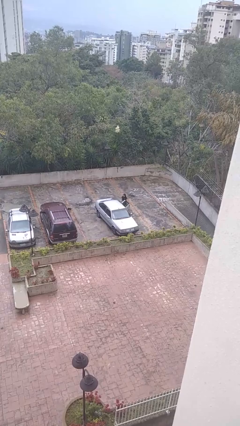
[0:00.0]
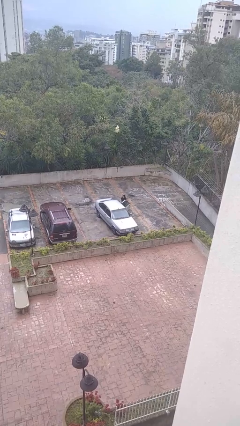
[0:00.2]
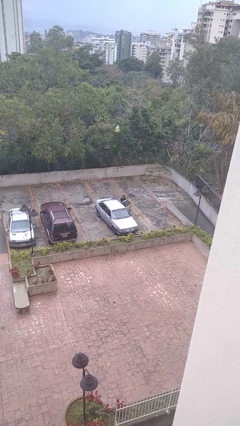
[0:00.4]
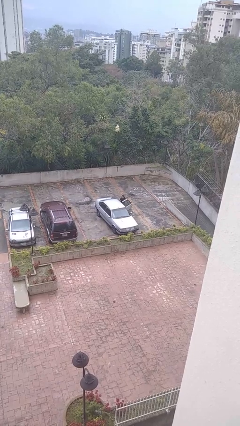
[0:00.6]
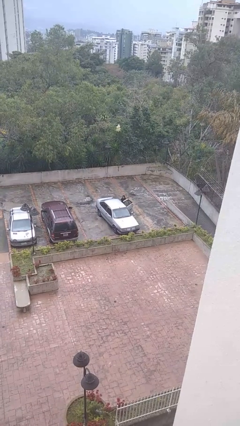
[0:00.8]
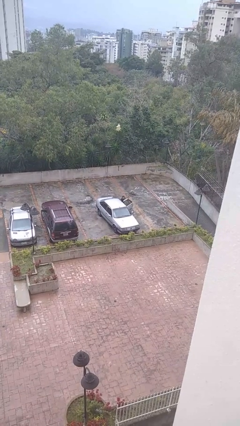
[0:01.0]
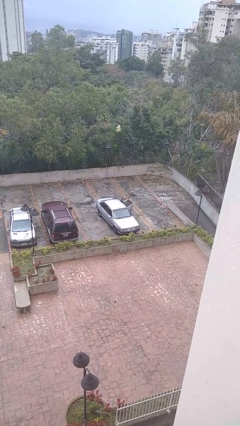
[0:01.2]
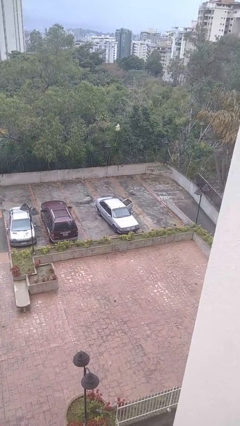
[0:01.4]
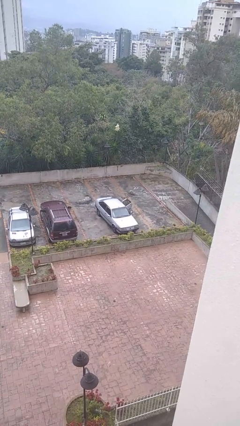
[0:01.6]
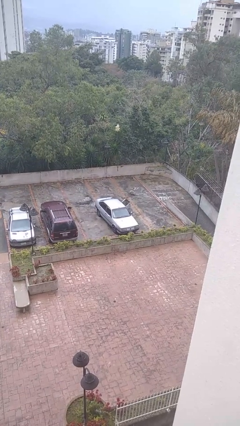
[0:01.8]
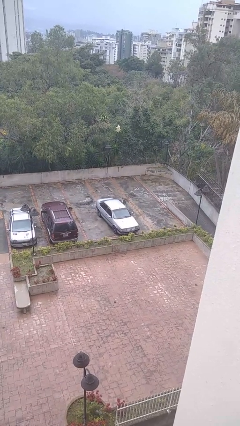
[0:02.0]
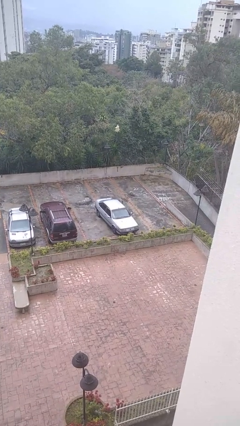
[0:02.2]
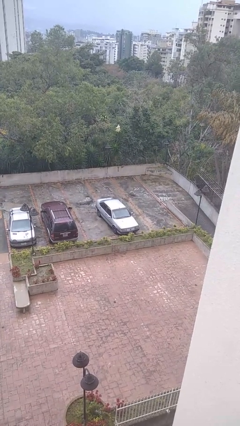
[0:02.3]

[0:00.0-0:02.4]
car picks up person

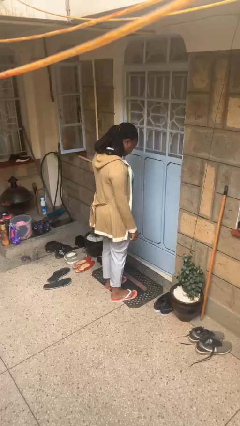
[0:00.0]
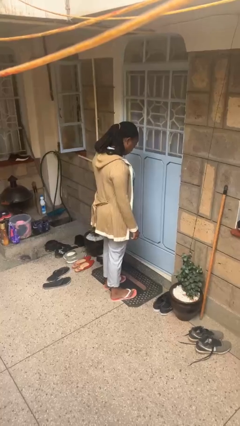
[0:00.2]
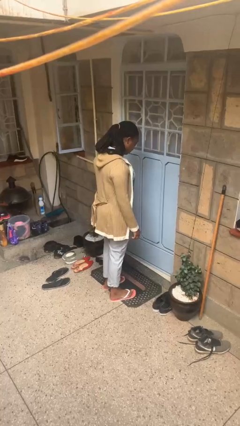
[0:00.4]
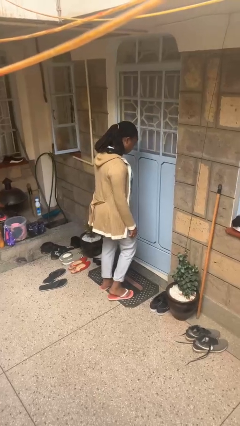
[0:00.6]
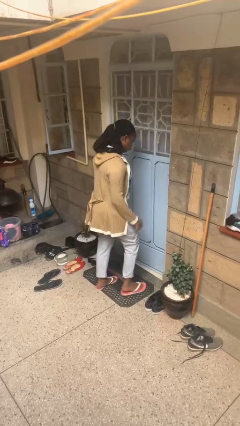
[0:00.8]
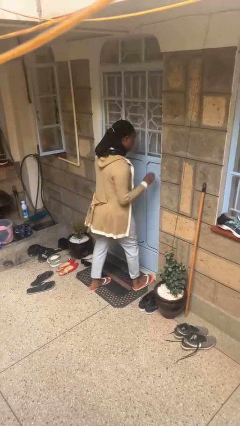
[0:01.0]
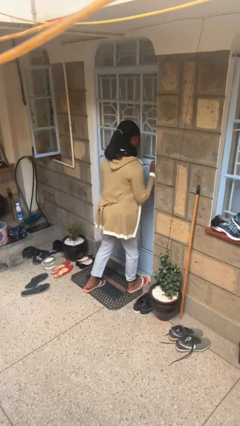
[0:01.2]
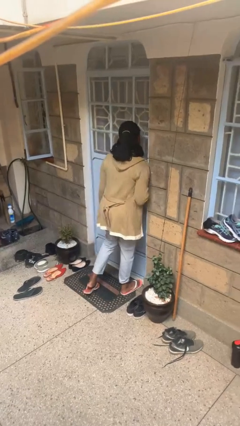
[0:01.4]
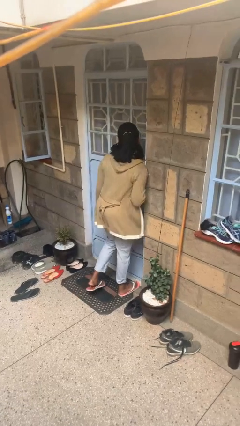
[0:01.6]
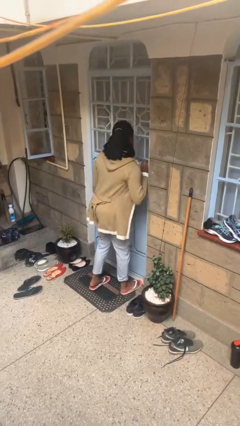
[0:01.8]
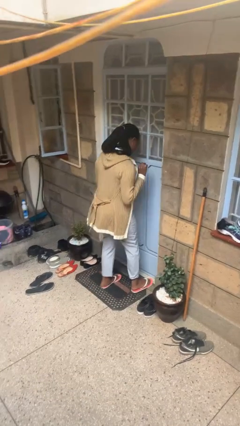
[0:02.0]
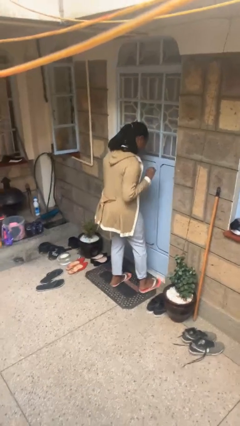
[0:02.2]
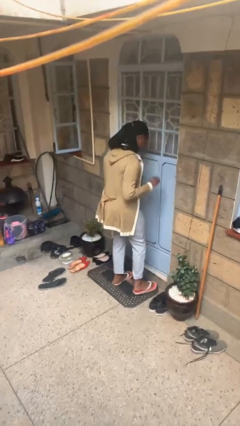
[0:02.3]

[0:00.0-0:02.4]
person bumps into wall

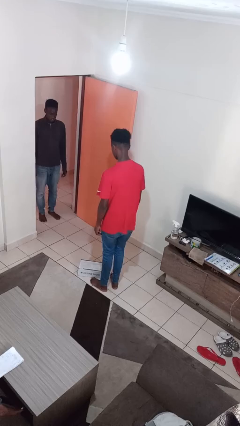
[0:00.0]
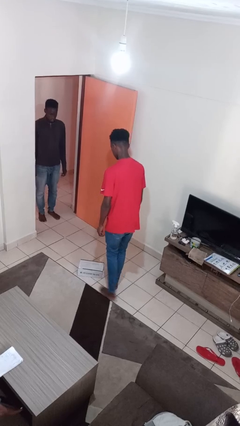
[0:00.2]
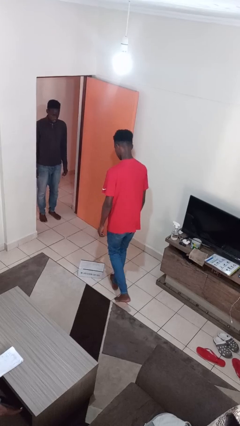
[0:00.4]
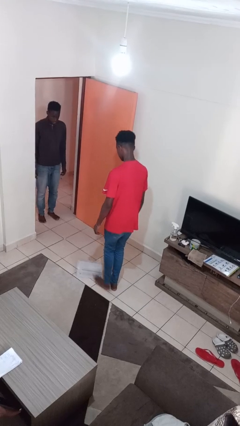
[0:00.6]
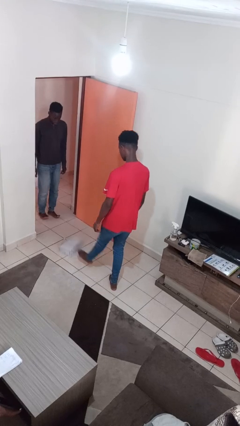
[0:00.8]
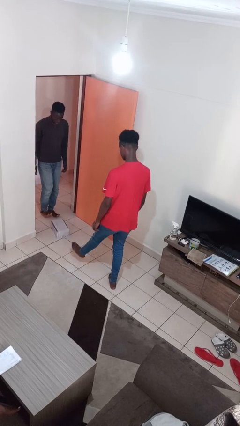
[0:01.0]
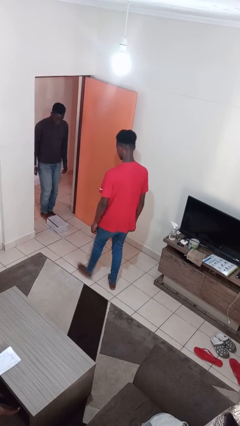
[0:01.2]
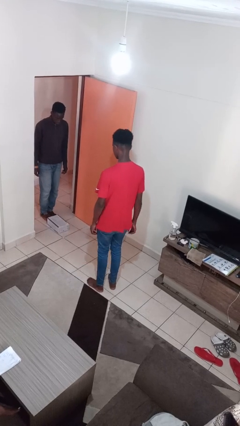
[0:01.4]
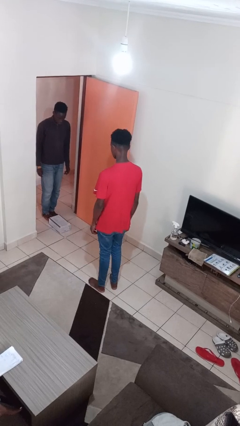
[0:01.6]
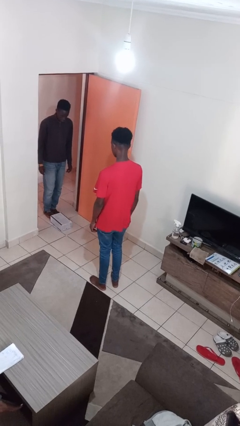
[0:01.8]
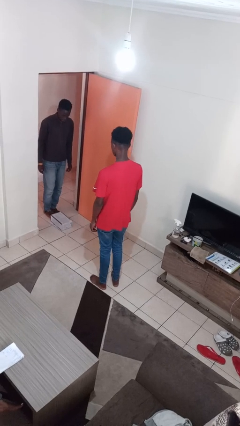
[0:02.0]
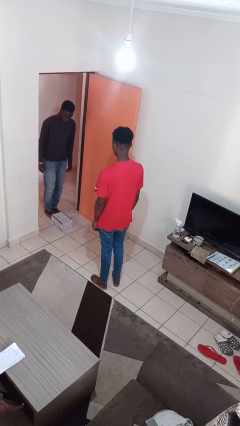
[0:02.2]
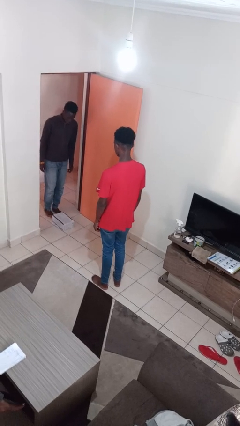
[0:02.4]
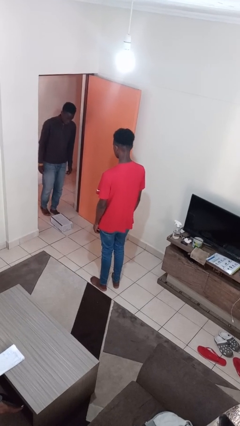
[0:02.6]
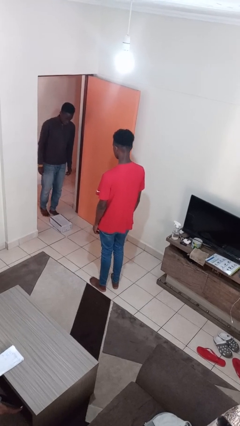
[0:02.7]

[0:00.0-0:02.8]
person kicks object to person

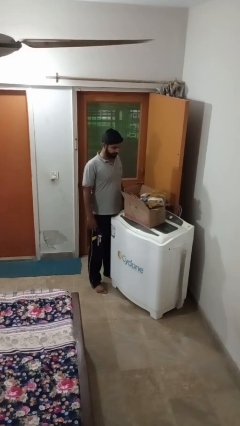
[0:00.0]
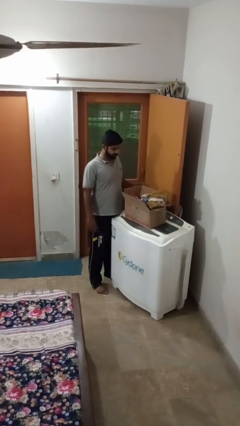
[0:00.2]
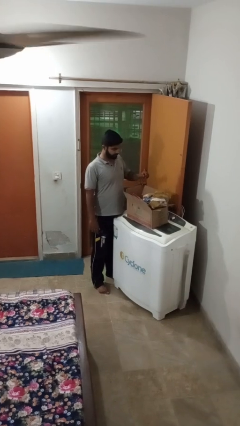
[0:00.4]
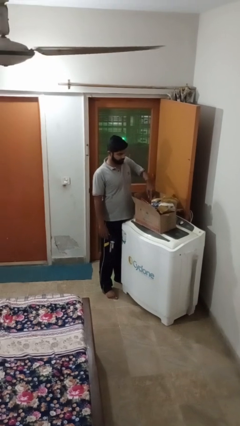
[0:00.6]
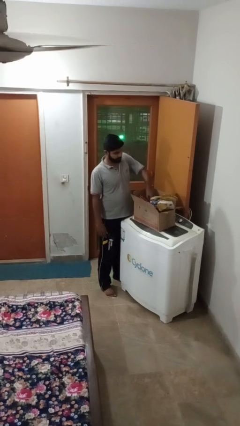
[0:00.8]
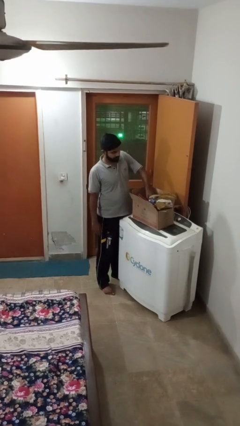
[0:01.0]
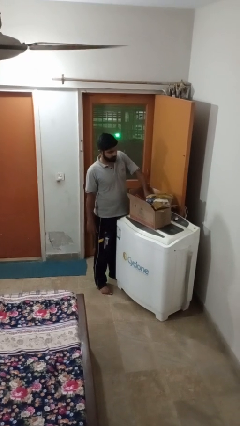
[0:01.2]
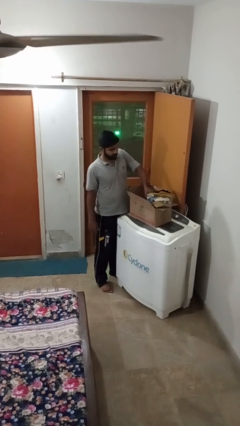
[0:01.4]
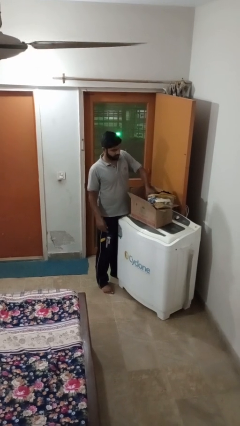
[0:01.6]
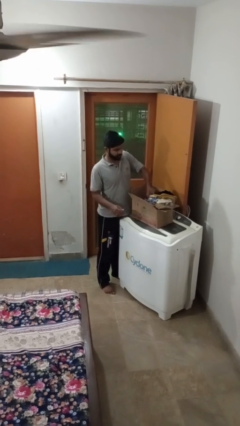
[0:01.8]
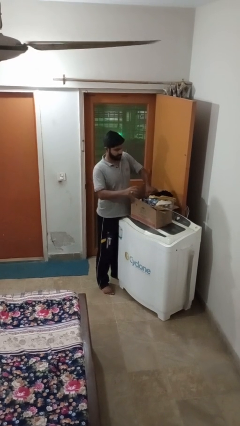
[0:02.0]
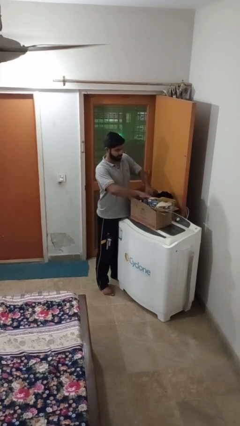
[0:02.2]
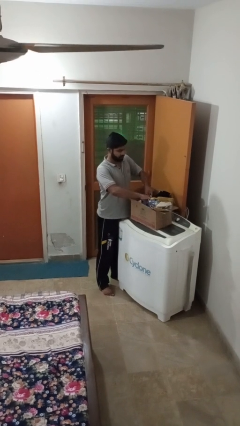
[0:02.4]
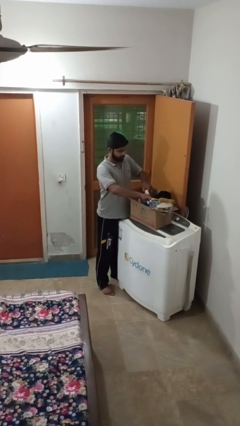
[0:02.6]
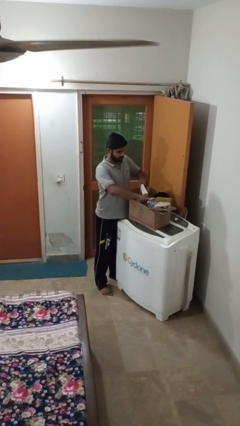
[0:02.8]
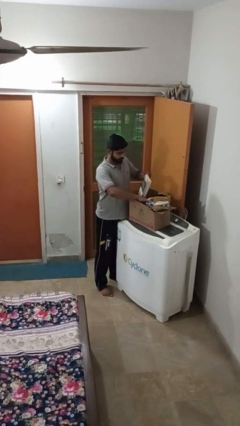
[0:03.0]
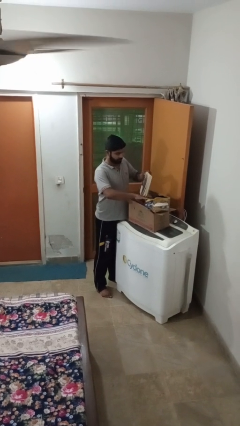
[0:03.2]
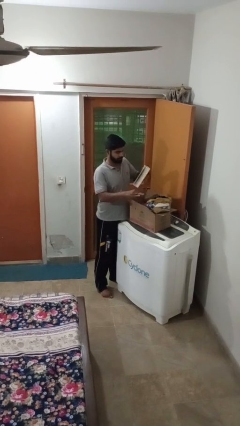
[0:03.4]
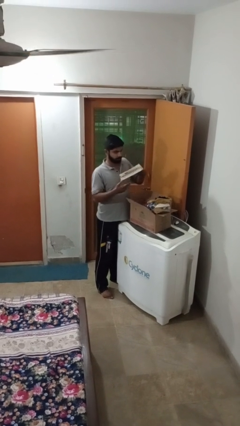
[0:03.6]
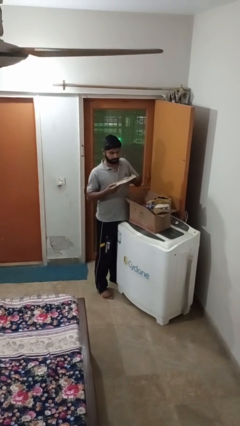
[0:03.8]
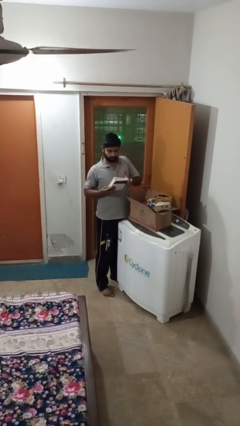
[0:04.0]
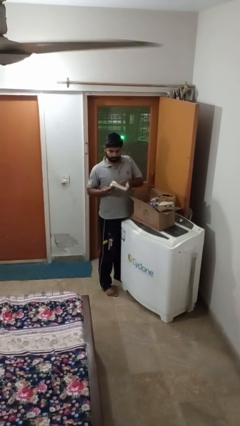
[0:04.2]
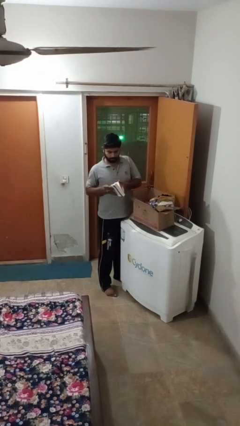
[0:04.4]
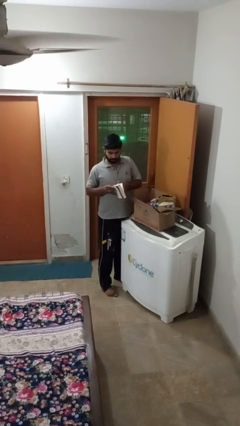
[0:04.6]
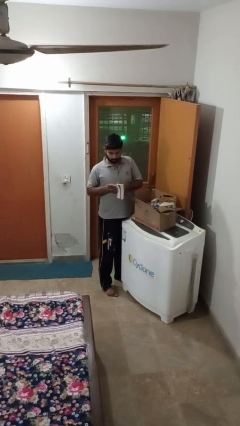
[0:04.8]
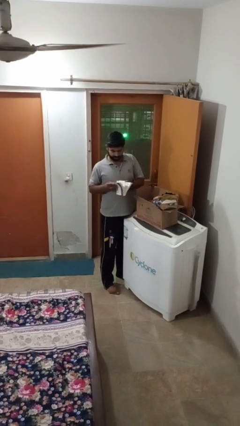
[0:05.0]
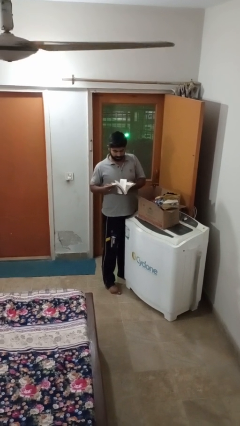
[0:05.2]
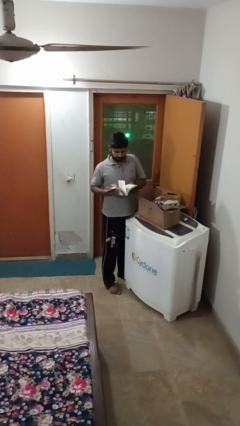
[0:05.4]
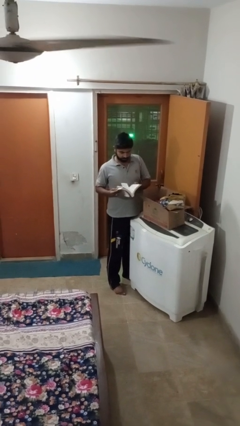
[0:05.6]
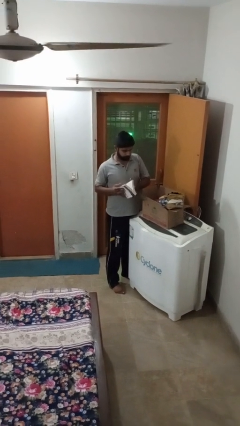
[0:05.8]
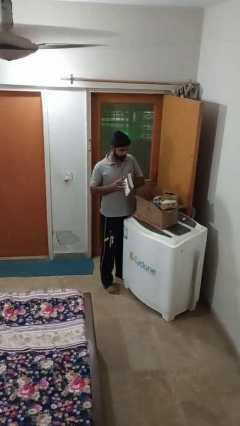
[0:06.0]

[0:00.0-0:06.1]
person takes object from box

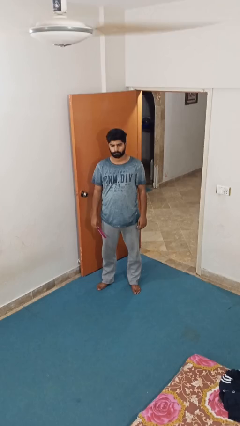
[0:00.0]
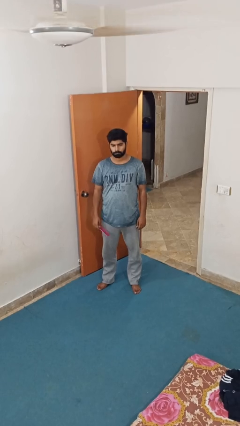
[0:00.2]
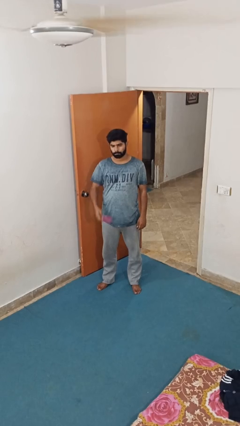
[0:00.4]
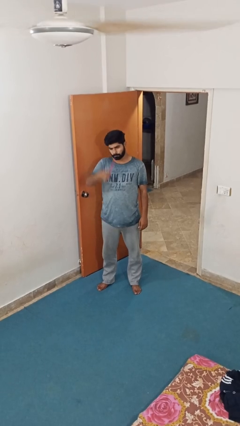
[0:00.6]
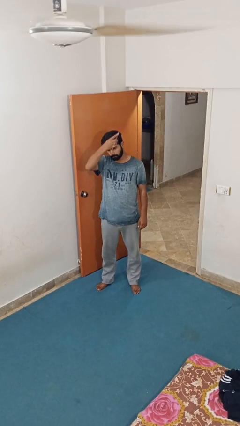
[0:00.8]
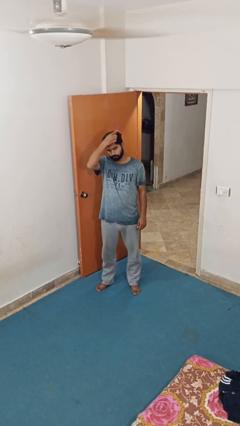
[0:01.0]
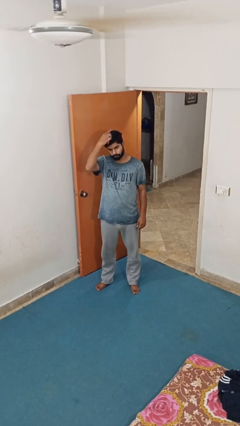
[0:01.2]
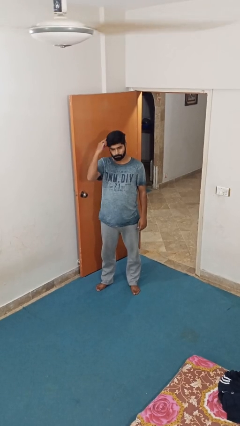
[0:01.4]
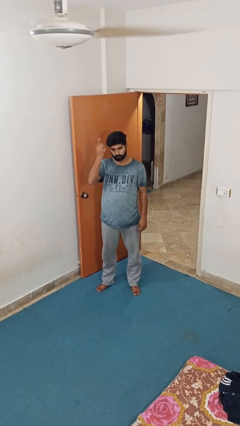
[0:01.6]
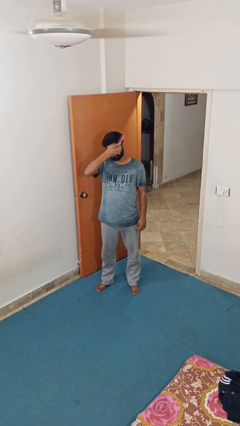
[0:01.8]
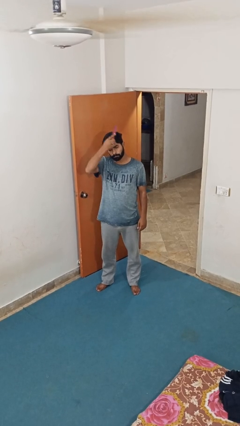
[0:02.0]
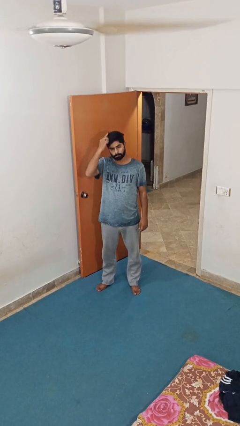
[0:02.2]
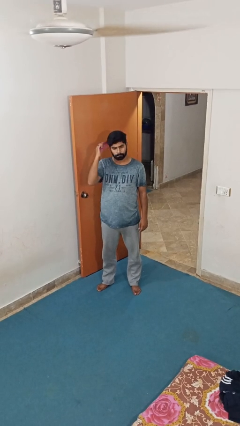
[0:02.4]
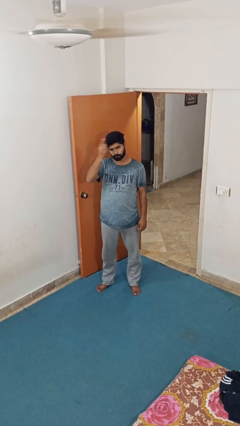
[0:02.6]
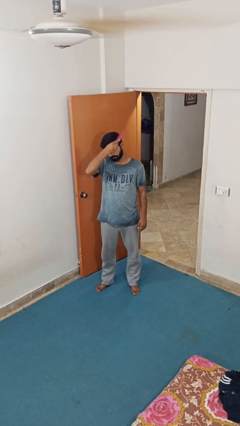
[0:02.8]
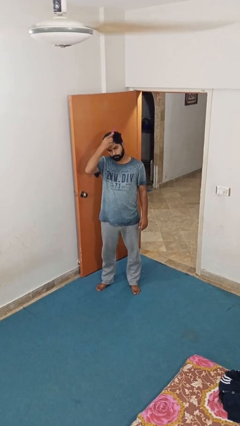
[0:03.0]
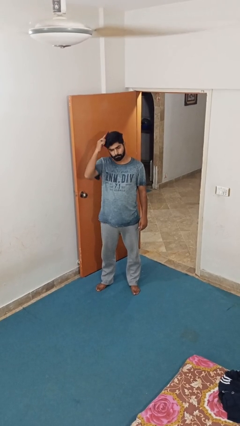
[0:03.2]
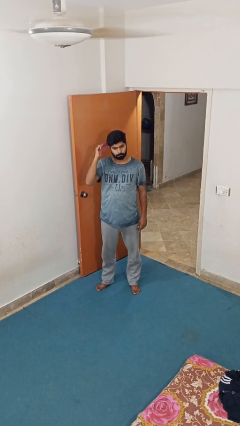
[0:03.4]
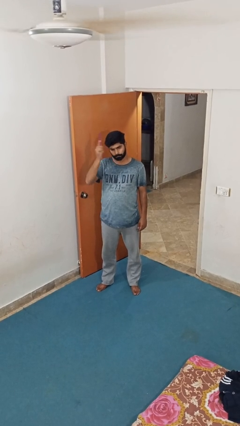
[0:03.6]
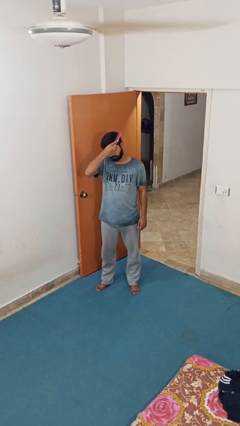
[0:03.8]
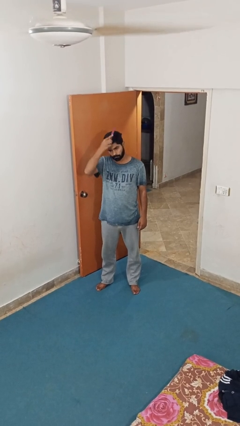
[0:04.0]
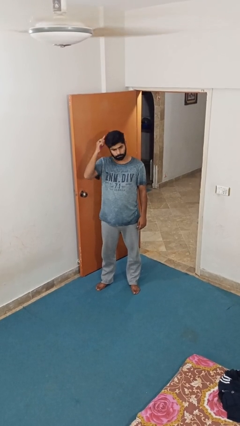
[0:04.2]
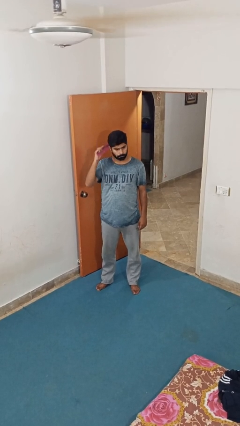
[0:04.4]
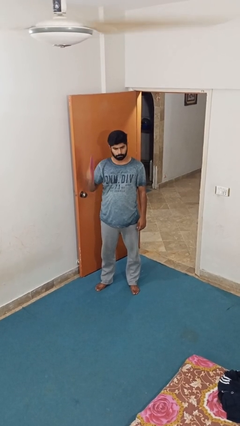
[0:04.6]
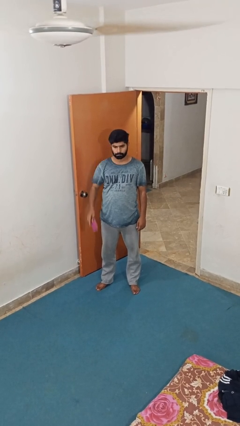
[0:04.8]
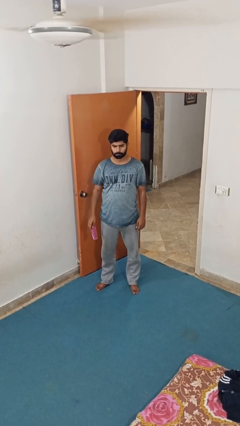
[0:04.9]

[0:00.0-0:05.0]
person brushes hair
